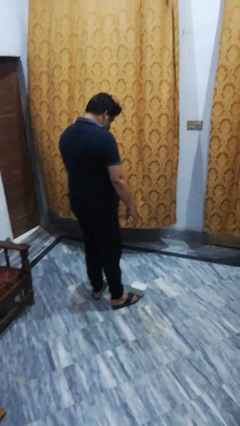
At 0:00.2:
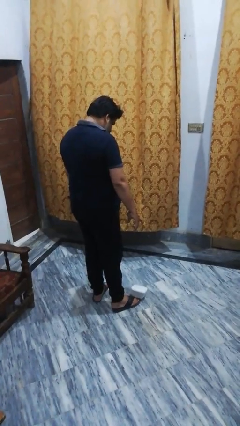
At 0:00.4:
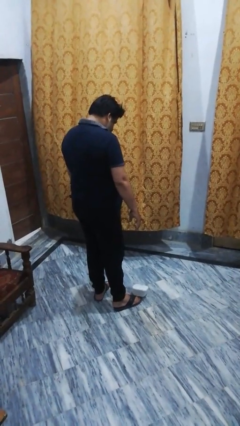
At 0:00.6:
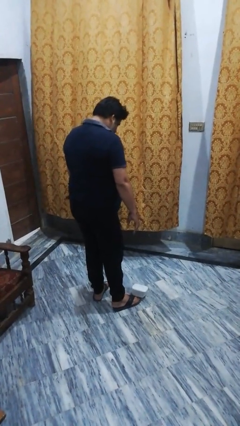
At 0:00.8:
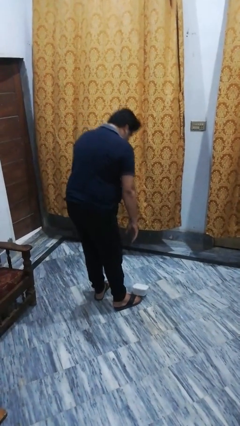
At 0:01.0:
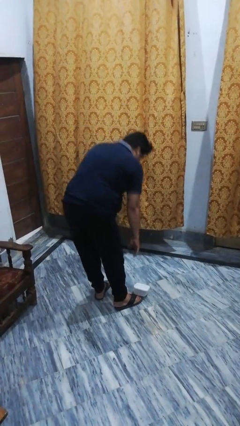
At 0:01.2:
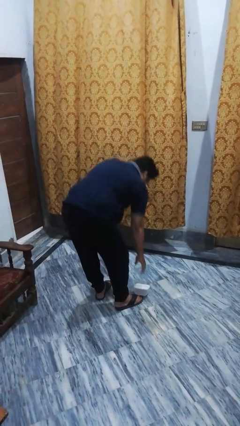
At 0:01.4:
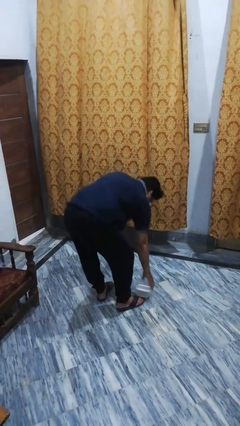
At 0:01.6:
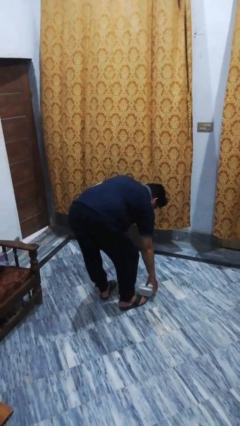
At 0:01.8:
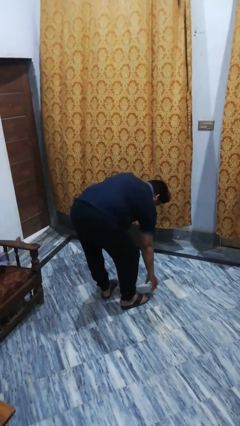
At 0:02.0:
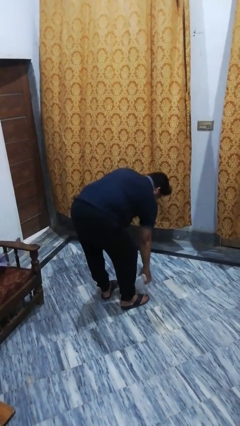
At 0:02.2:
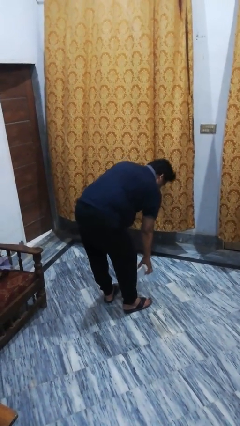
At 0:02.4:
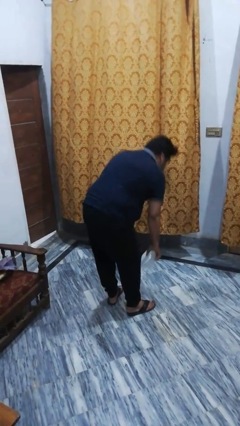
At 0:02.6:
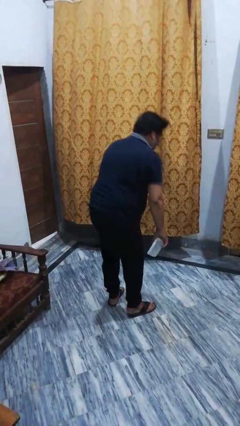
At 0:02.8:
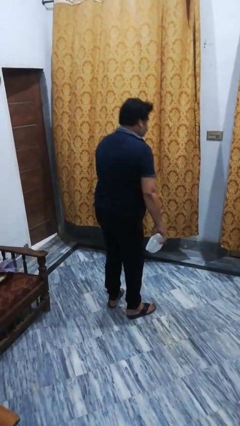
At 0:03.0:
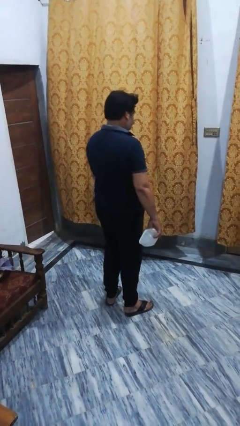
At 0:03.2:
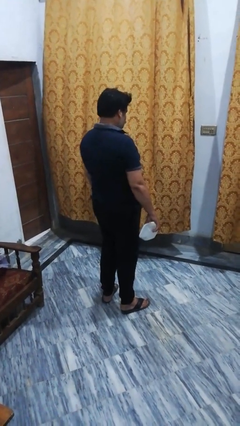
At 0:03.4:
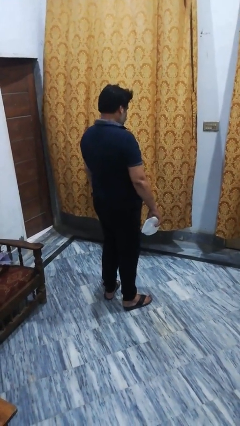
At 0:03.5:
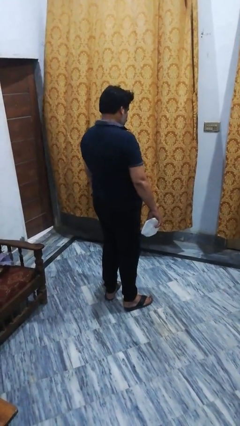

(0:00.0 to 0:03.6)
person picks up object from floor

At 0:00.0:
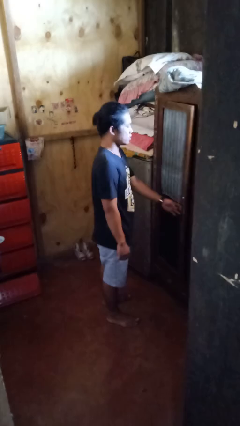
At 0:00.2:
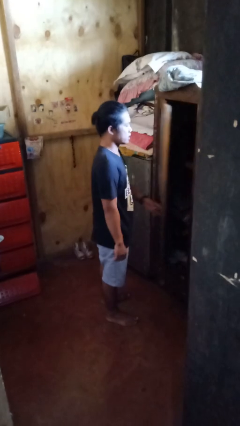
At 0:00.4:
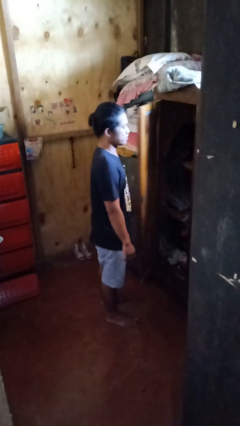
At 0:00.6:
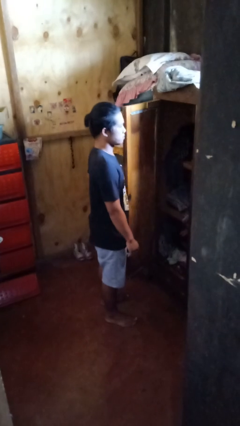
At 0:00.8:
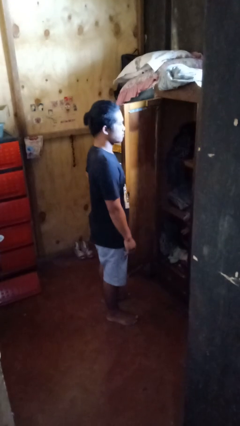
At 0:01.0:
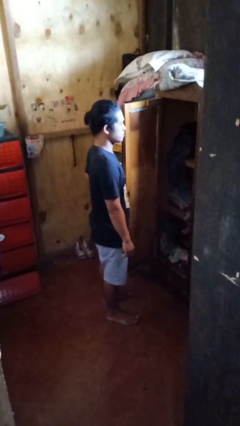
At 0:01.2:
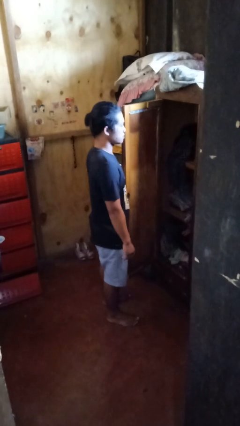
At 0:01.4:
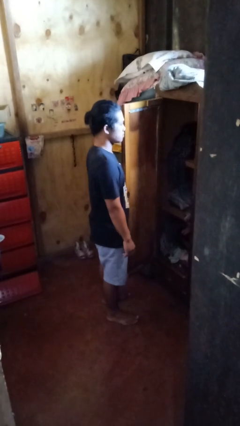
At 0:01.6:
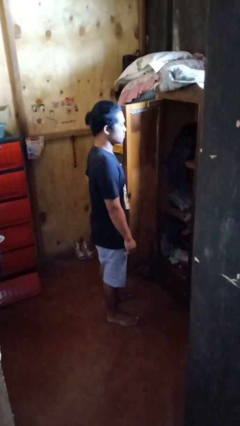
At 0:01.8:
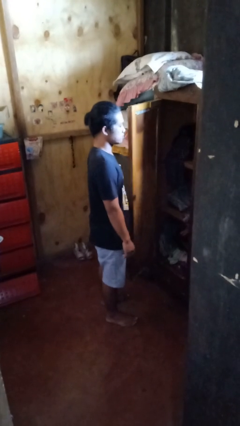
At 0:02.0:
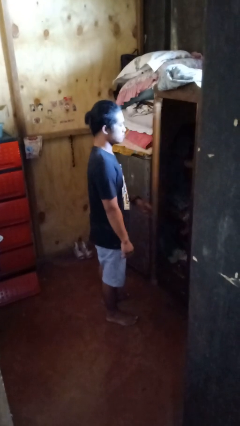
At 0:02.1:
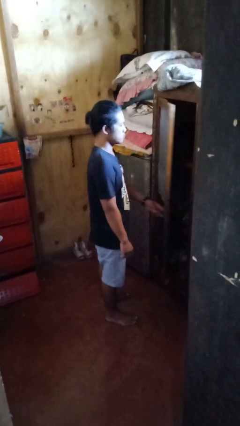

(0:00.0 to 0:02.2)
person opens closet door

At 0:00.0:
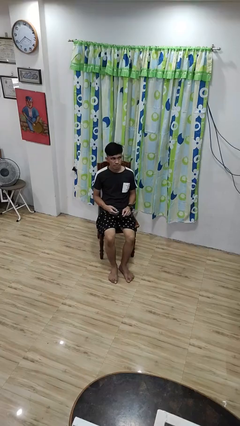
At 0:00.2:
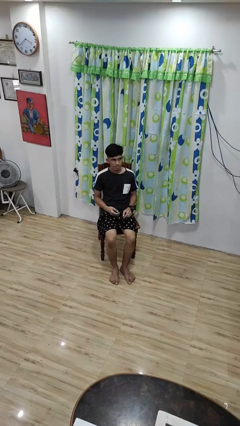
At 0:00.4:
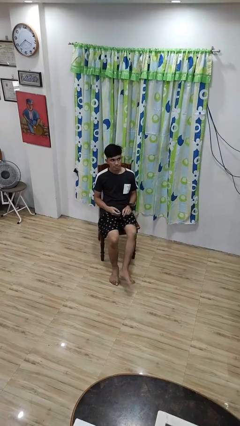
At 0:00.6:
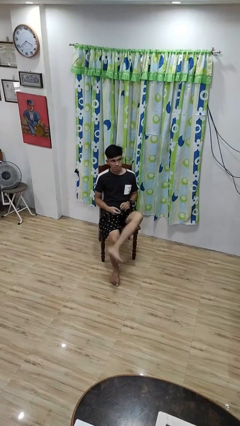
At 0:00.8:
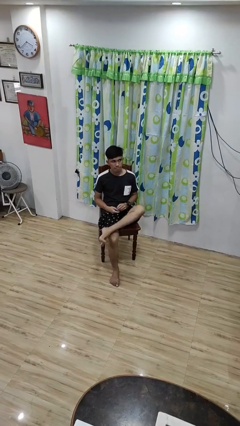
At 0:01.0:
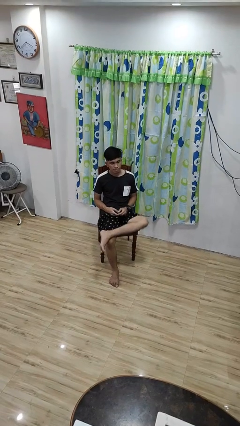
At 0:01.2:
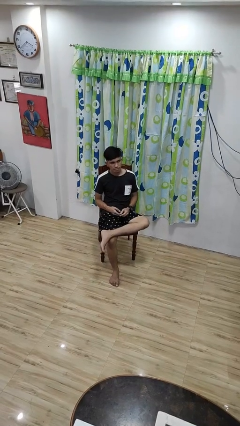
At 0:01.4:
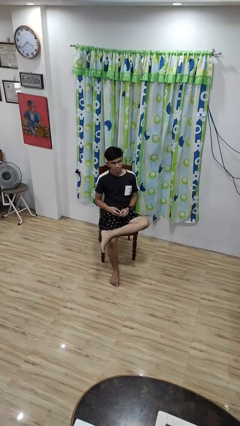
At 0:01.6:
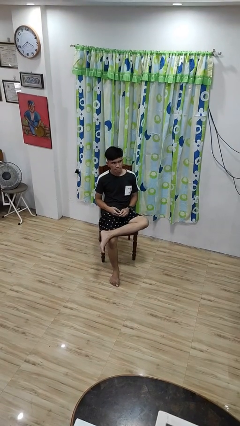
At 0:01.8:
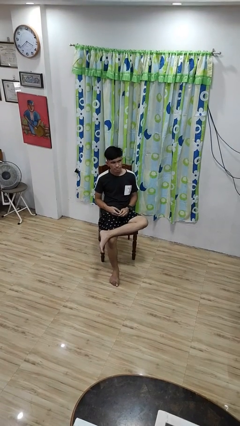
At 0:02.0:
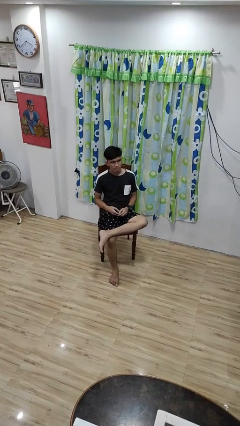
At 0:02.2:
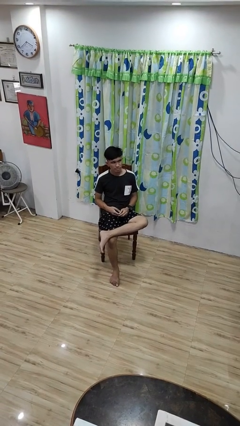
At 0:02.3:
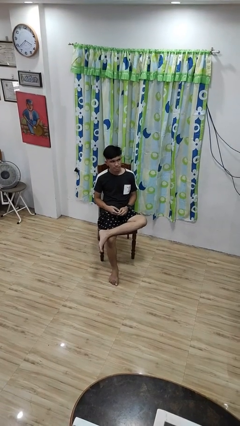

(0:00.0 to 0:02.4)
person crosses legs

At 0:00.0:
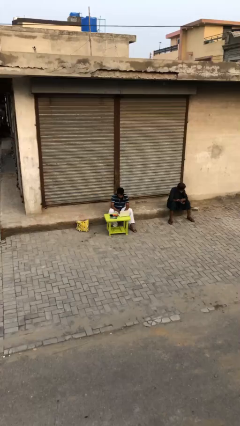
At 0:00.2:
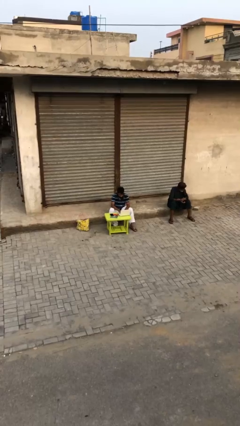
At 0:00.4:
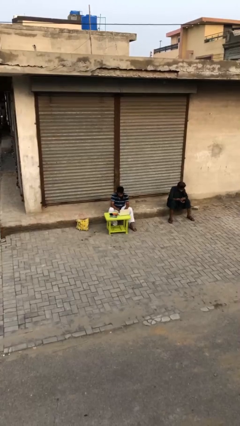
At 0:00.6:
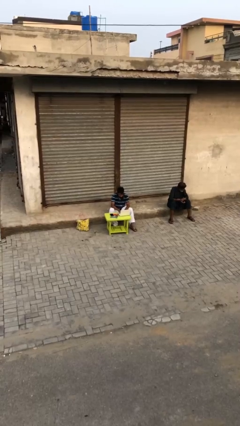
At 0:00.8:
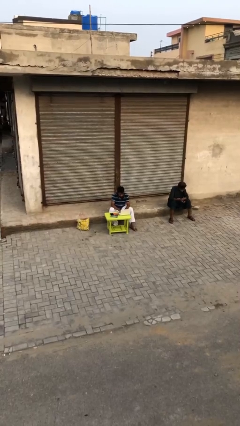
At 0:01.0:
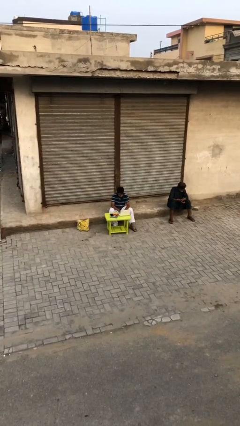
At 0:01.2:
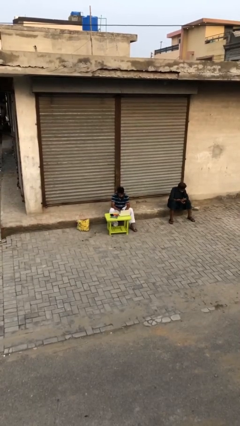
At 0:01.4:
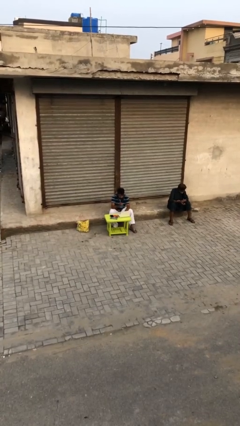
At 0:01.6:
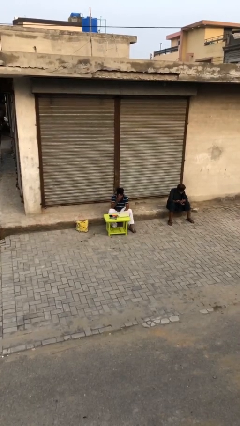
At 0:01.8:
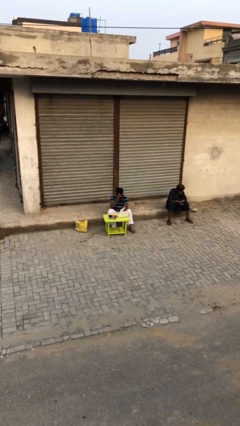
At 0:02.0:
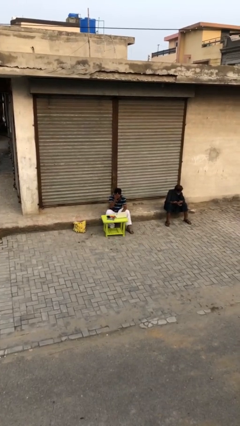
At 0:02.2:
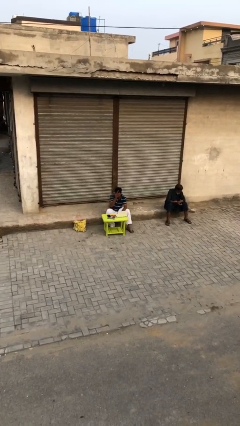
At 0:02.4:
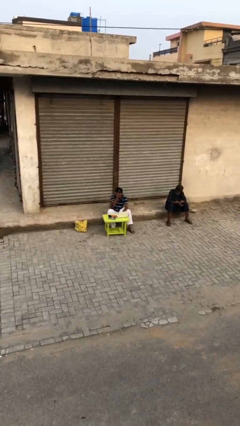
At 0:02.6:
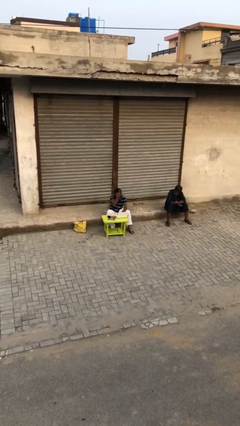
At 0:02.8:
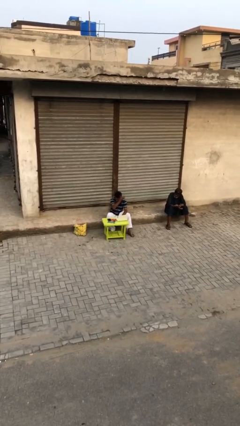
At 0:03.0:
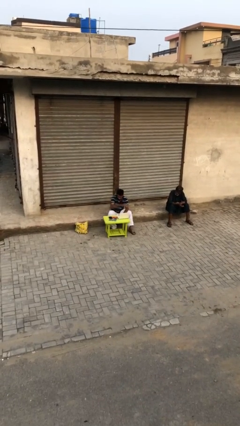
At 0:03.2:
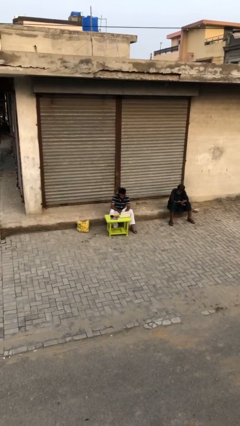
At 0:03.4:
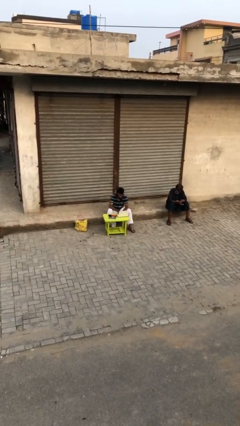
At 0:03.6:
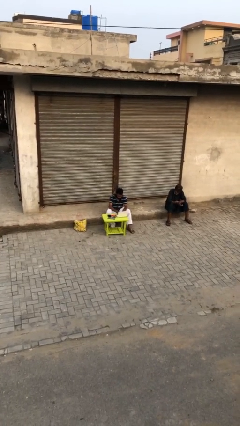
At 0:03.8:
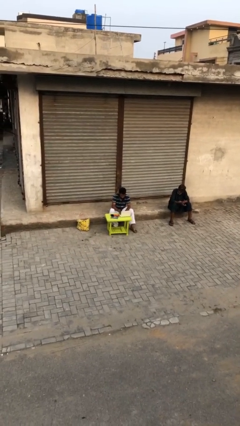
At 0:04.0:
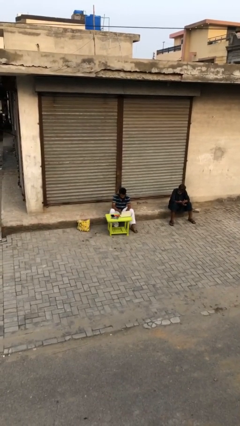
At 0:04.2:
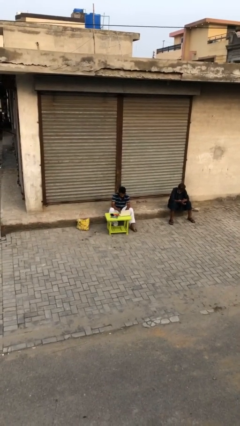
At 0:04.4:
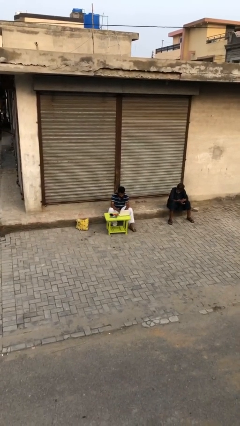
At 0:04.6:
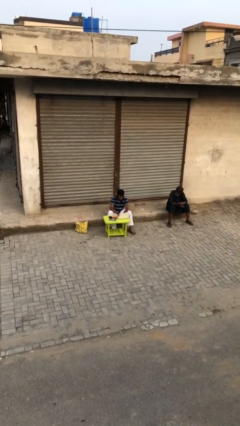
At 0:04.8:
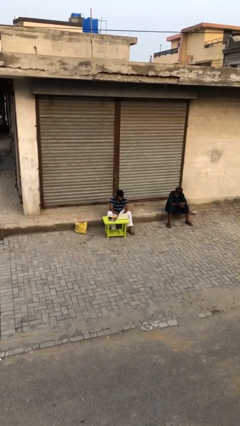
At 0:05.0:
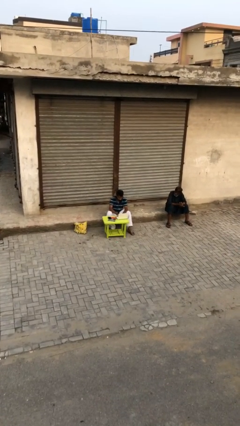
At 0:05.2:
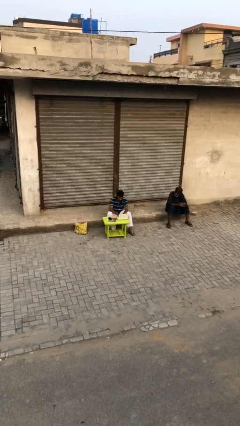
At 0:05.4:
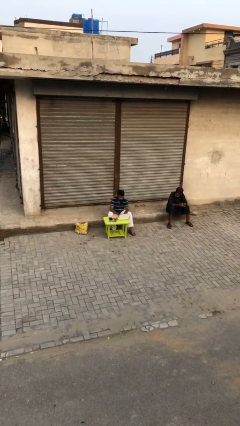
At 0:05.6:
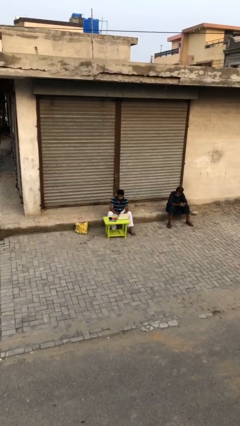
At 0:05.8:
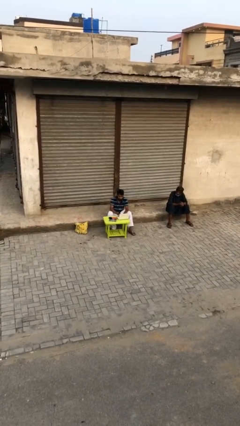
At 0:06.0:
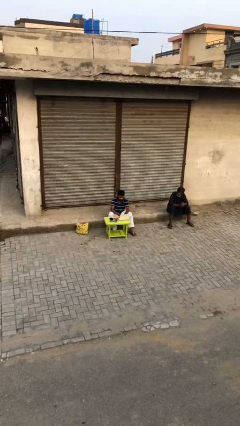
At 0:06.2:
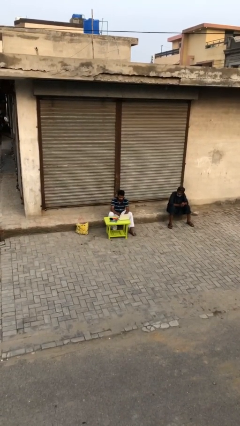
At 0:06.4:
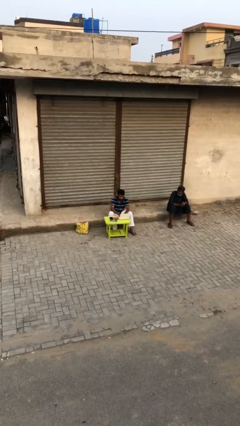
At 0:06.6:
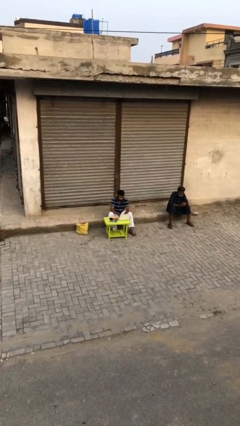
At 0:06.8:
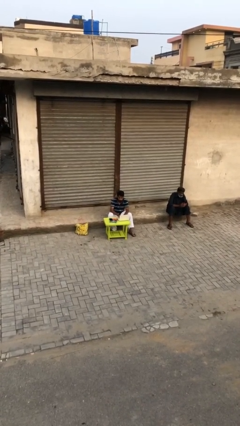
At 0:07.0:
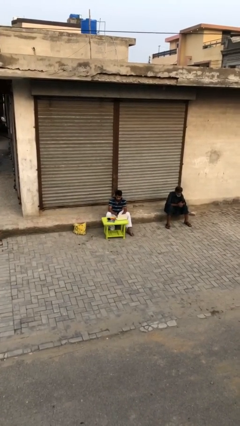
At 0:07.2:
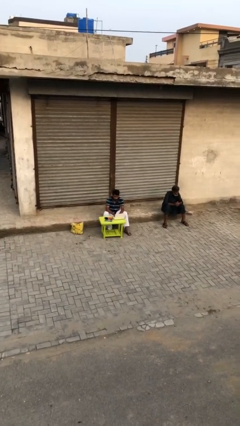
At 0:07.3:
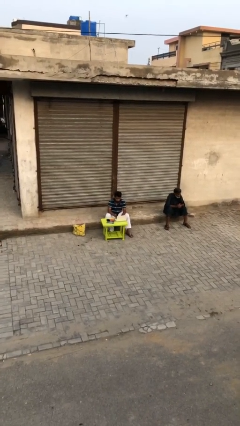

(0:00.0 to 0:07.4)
person interacts with laptop

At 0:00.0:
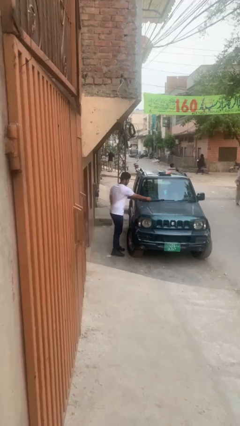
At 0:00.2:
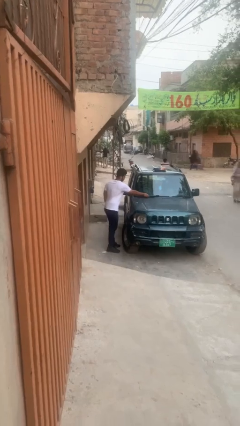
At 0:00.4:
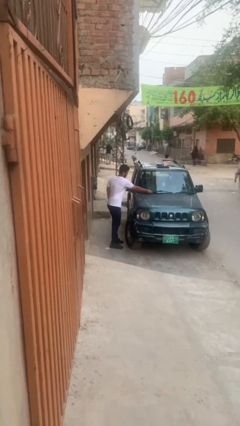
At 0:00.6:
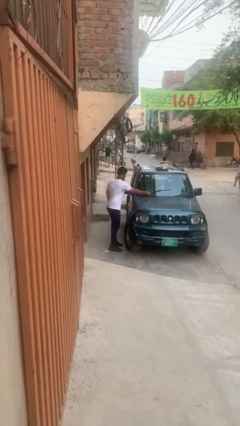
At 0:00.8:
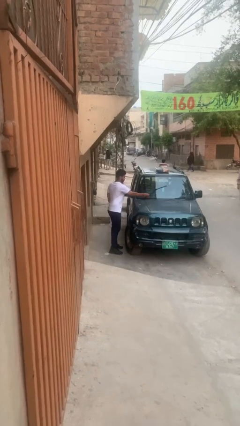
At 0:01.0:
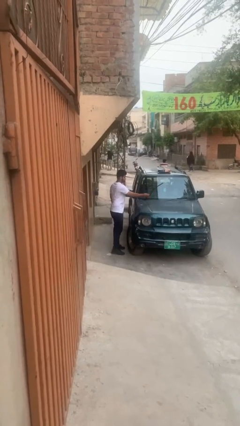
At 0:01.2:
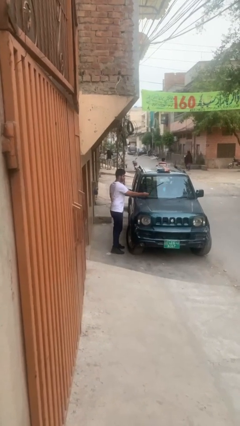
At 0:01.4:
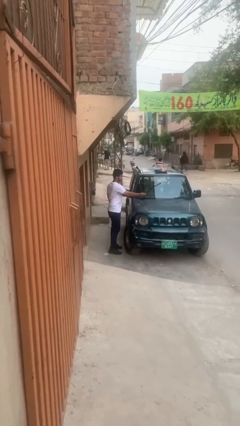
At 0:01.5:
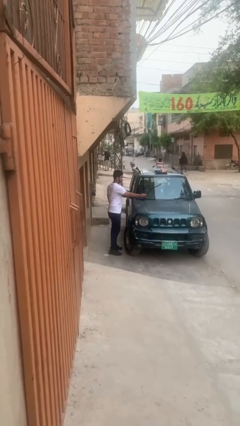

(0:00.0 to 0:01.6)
person flips up car wipers

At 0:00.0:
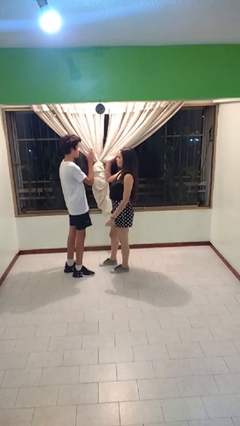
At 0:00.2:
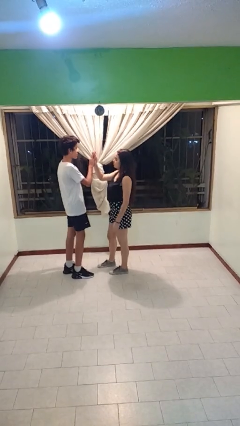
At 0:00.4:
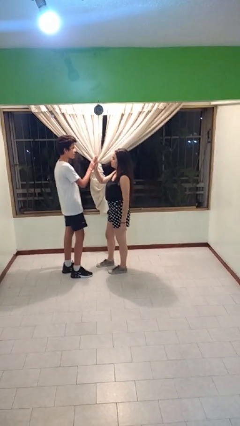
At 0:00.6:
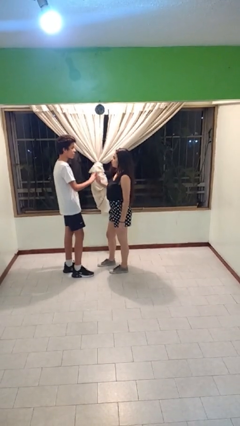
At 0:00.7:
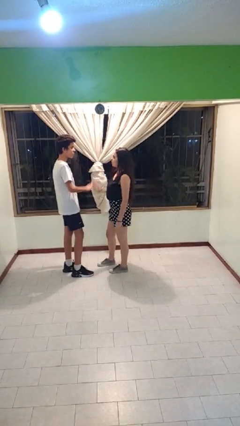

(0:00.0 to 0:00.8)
person highfives hand
